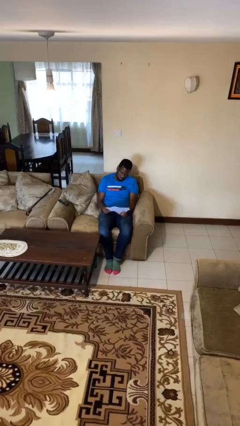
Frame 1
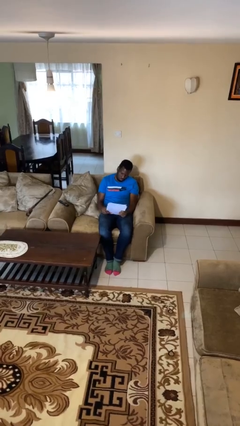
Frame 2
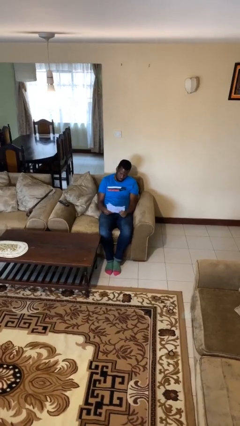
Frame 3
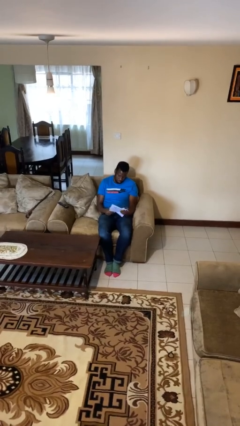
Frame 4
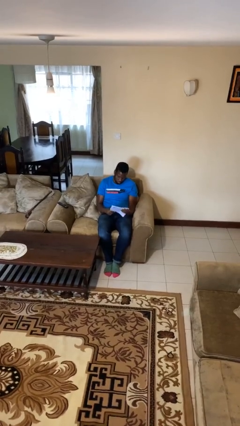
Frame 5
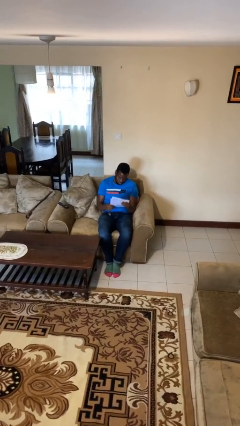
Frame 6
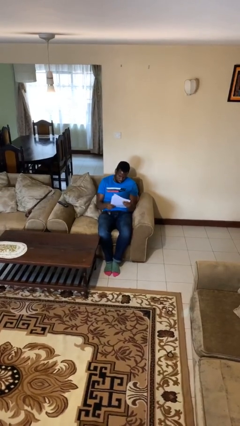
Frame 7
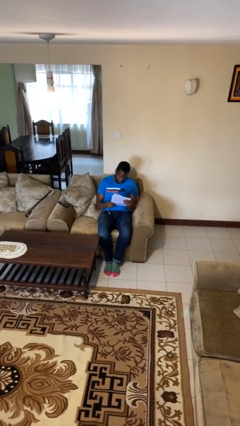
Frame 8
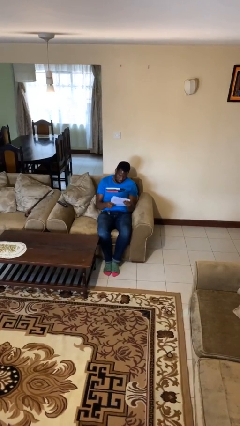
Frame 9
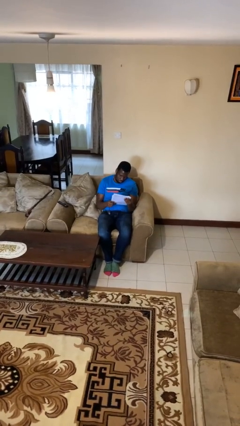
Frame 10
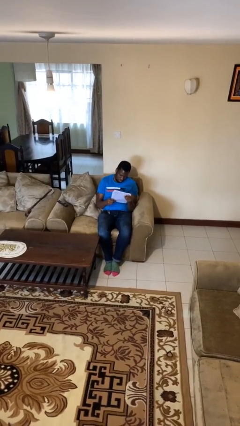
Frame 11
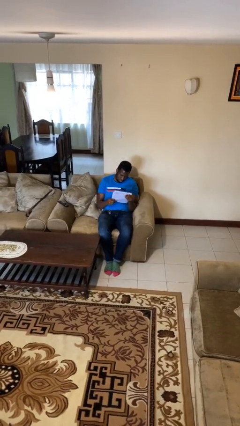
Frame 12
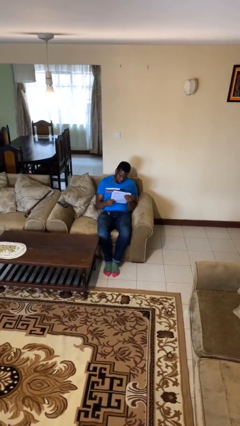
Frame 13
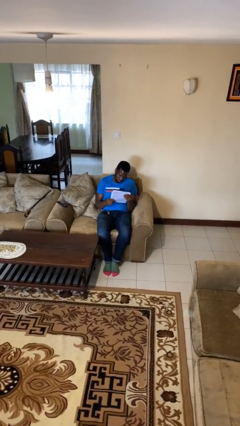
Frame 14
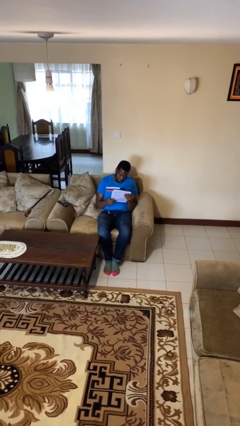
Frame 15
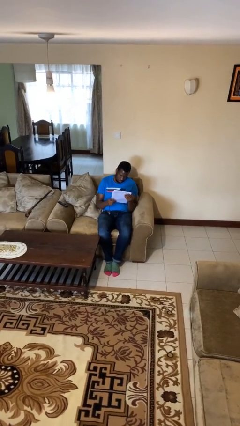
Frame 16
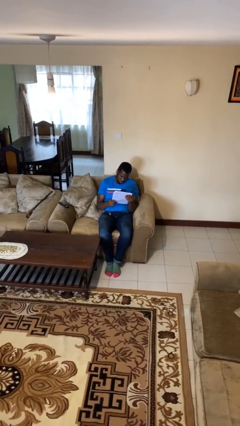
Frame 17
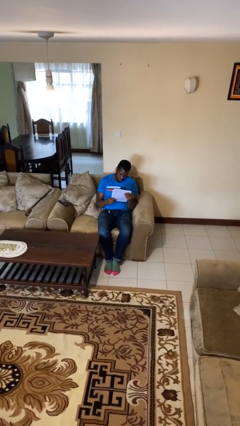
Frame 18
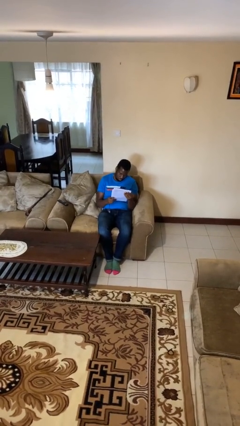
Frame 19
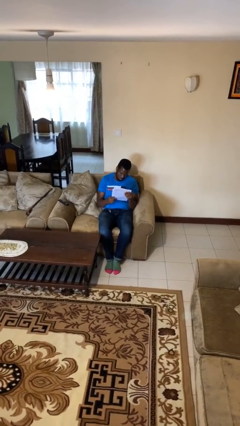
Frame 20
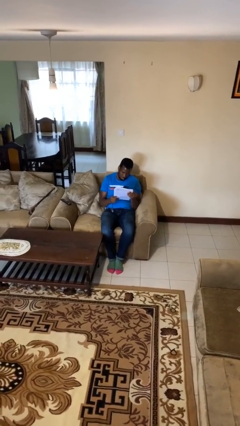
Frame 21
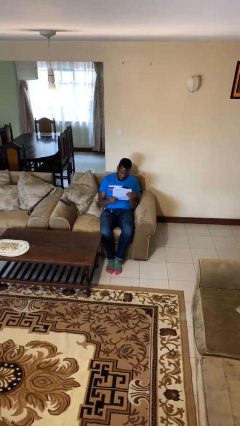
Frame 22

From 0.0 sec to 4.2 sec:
person reads document

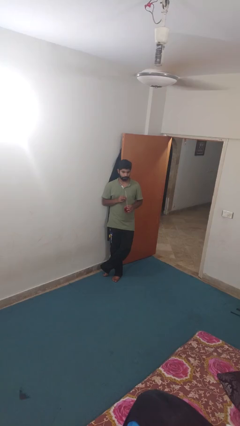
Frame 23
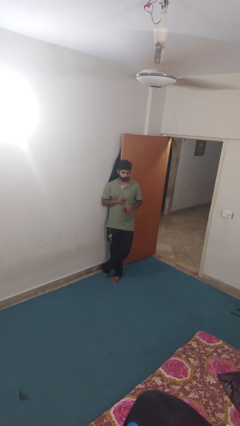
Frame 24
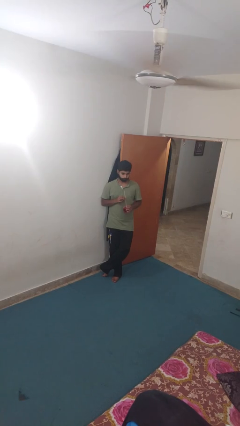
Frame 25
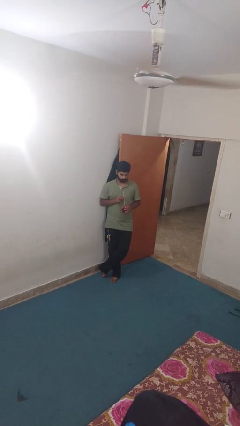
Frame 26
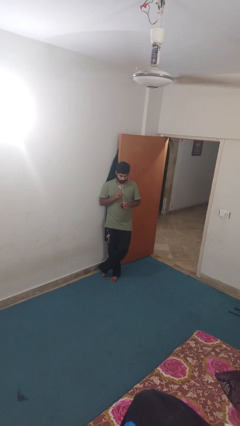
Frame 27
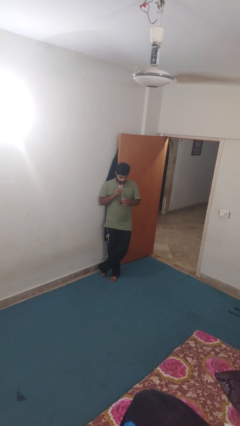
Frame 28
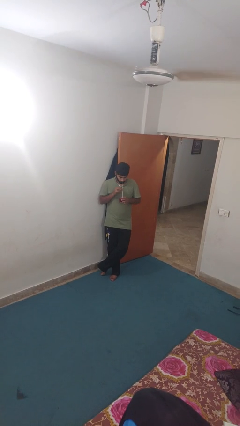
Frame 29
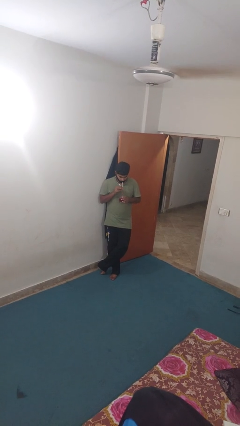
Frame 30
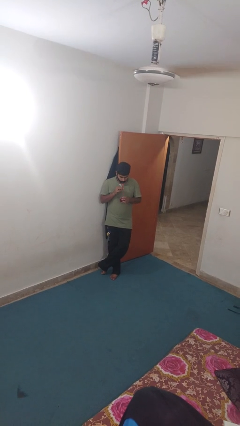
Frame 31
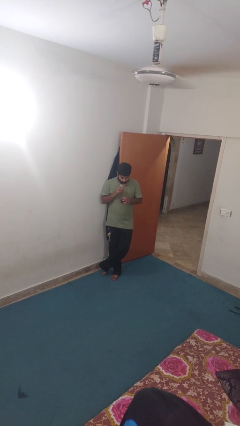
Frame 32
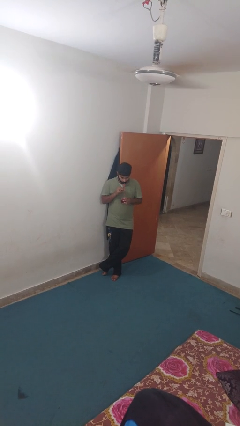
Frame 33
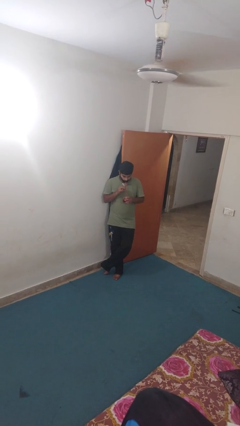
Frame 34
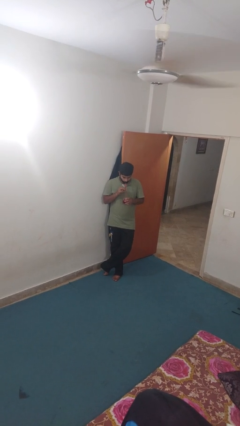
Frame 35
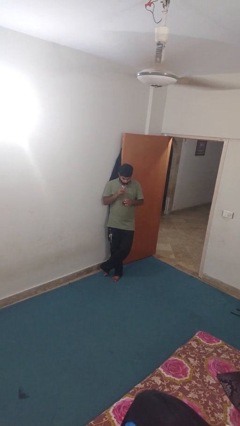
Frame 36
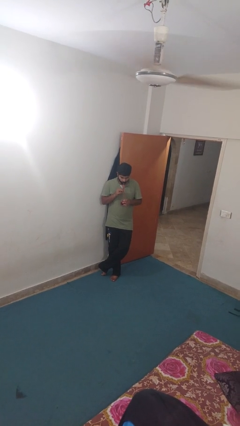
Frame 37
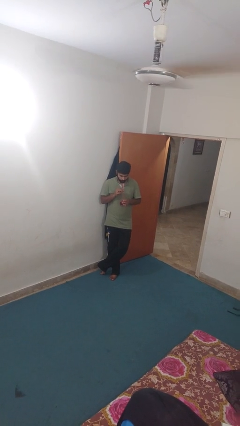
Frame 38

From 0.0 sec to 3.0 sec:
person drinks from straw

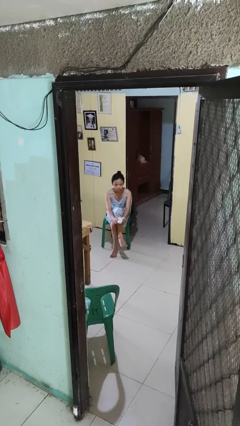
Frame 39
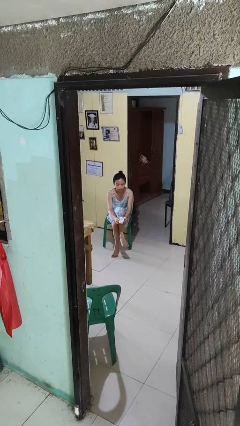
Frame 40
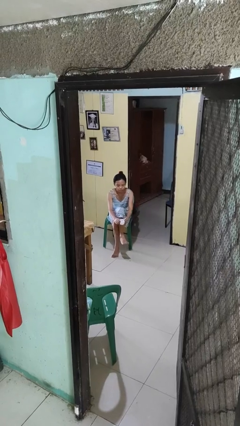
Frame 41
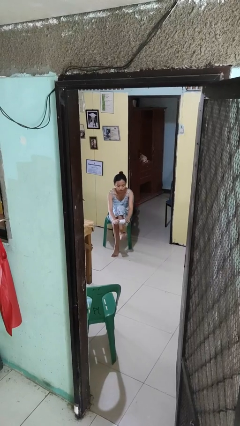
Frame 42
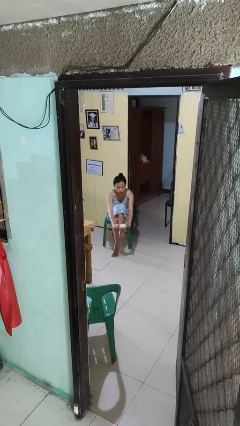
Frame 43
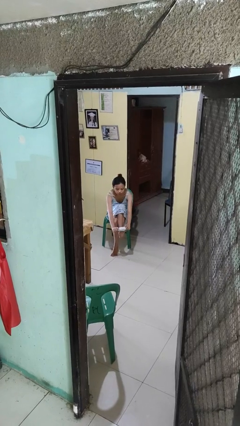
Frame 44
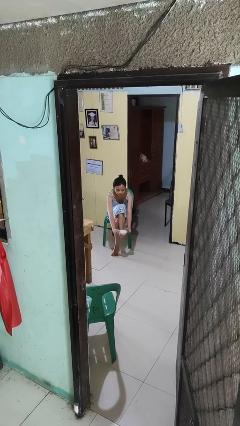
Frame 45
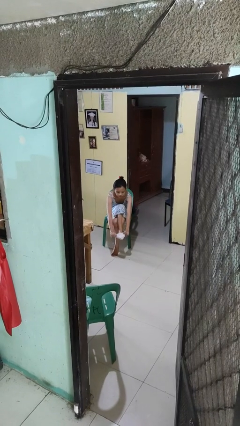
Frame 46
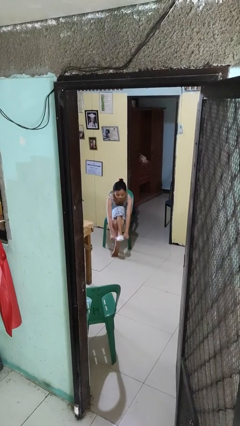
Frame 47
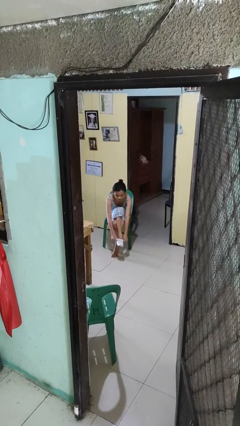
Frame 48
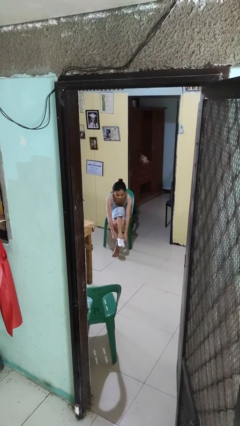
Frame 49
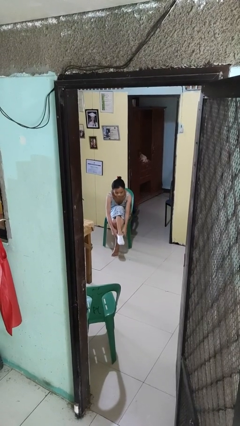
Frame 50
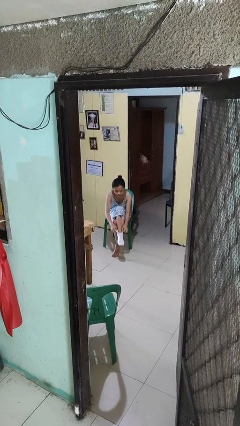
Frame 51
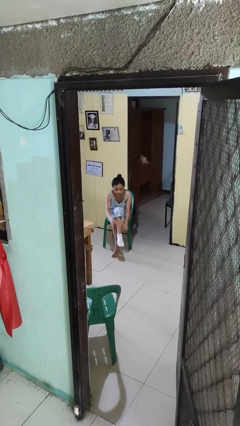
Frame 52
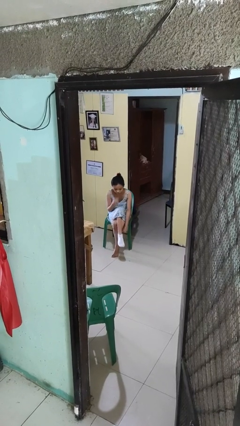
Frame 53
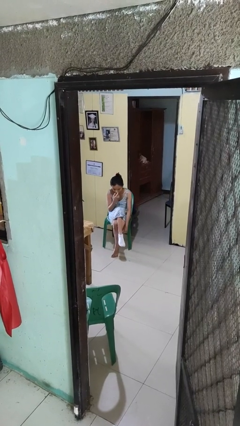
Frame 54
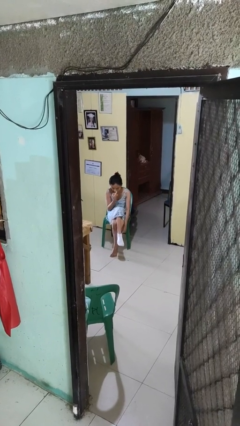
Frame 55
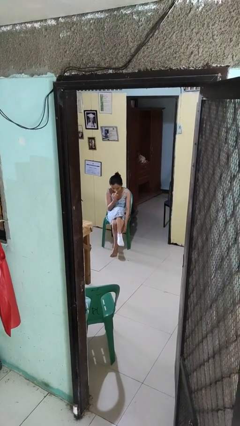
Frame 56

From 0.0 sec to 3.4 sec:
person puts on socks

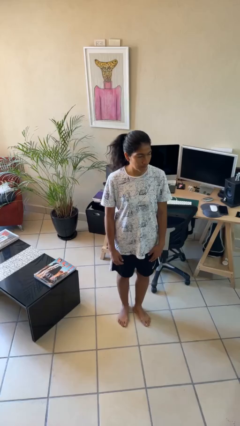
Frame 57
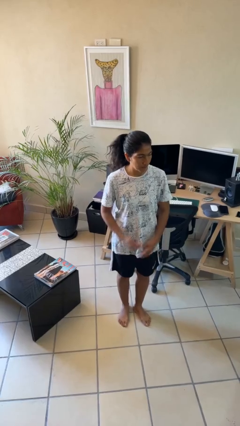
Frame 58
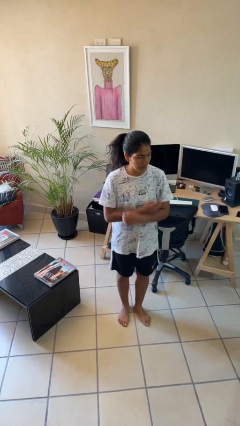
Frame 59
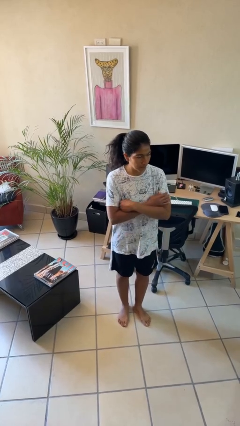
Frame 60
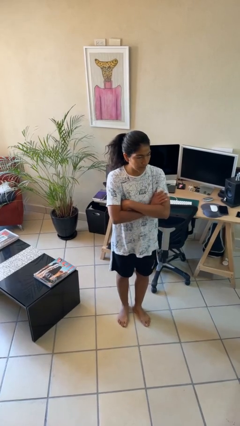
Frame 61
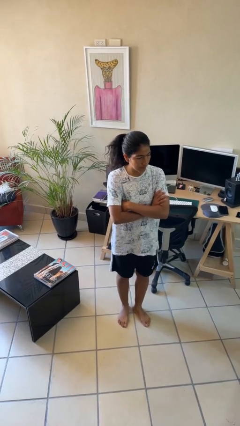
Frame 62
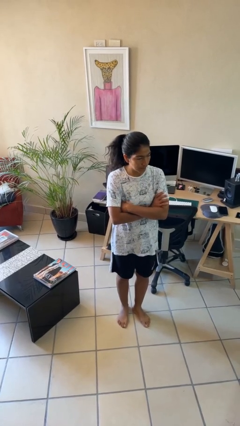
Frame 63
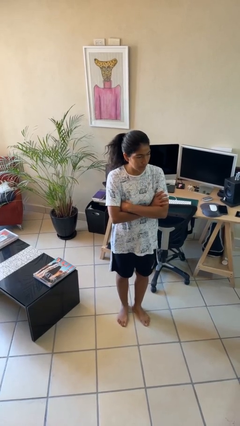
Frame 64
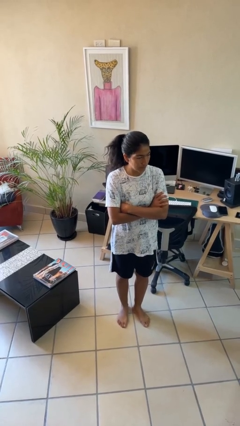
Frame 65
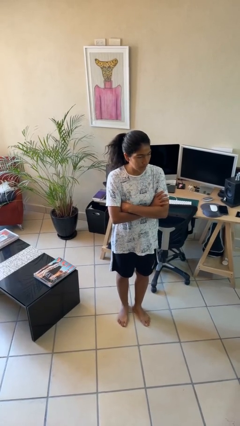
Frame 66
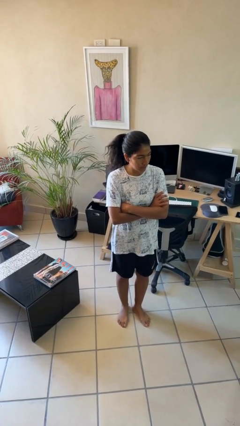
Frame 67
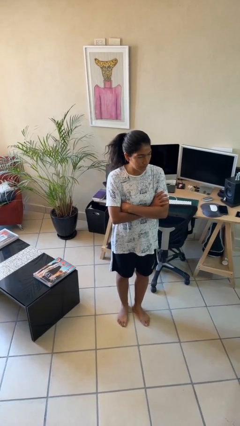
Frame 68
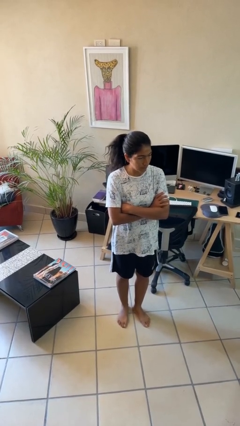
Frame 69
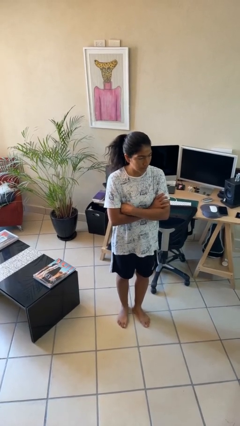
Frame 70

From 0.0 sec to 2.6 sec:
person crosses arms

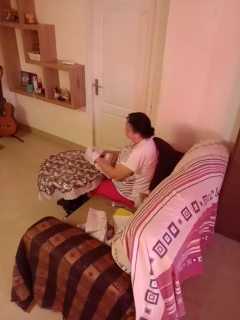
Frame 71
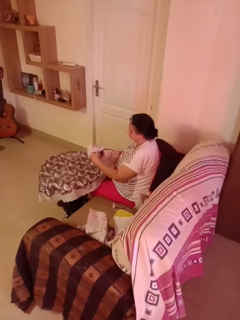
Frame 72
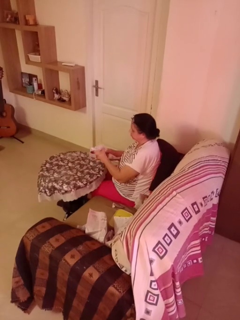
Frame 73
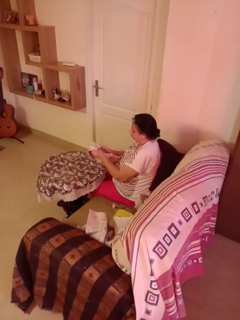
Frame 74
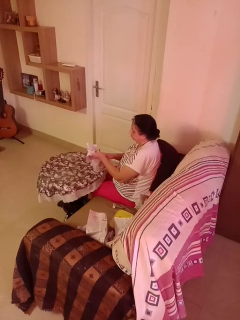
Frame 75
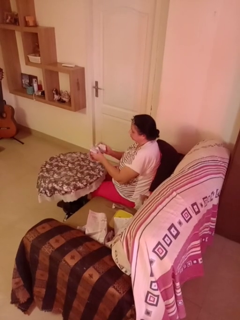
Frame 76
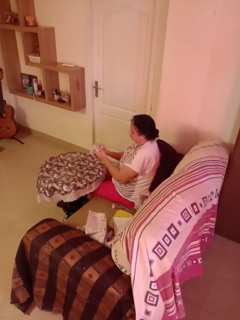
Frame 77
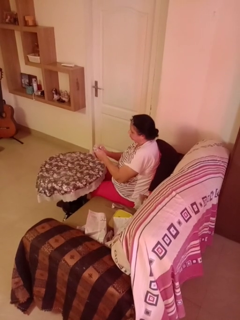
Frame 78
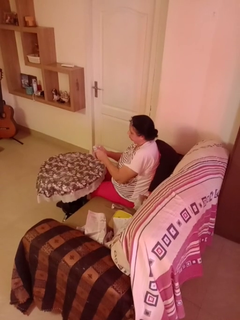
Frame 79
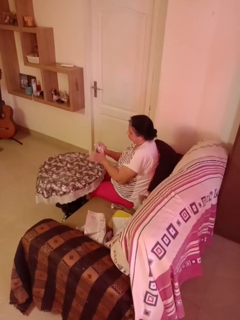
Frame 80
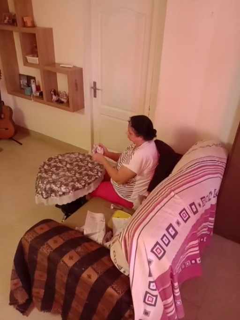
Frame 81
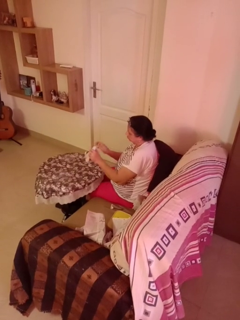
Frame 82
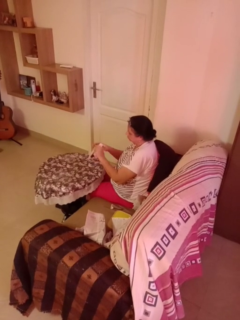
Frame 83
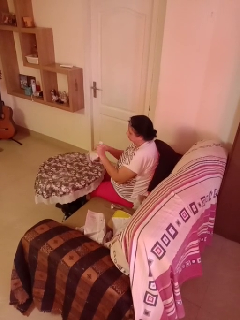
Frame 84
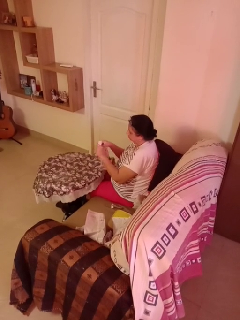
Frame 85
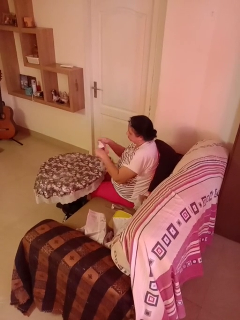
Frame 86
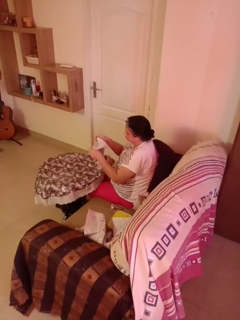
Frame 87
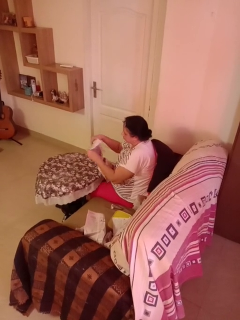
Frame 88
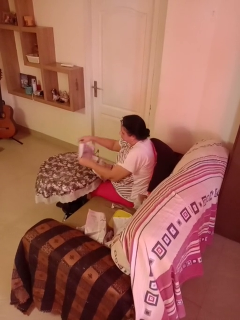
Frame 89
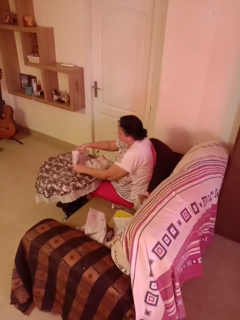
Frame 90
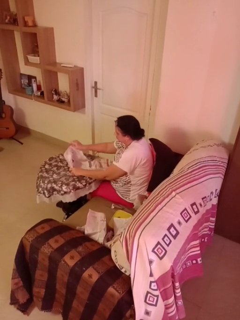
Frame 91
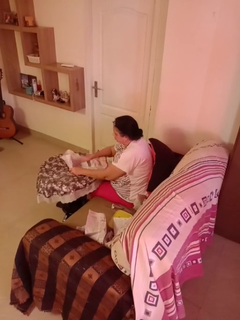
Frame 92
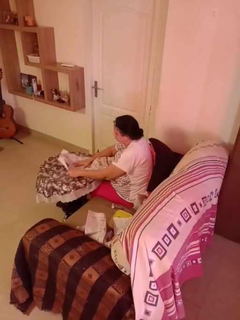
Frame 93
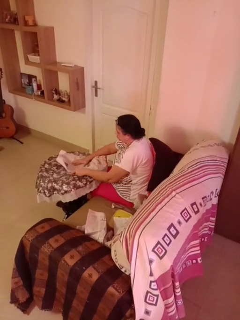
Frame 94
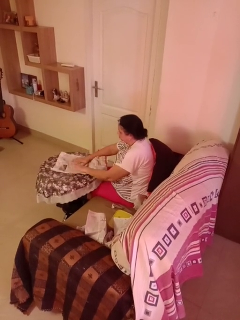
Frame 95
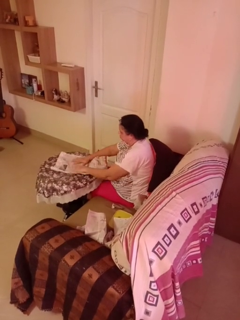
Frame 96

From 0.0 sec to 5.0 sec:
person crumples paper

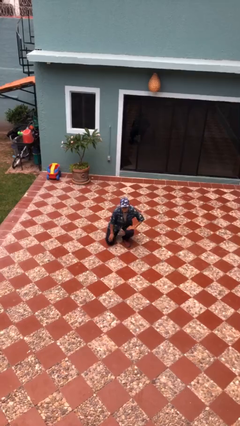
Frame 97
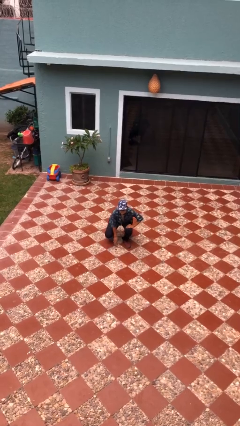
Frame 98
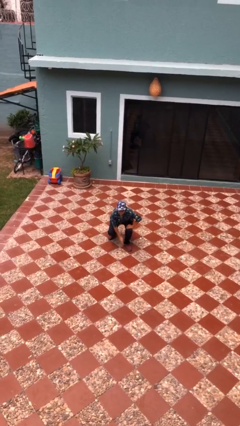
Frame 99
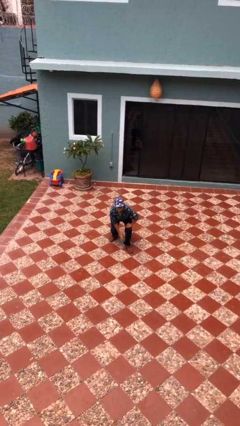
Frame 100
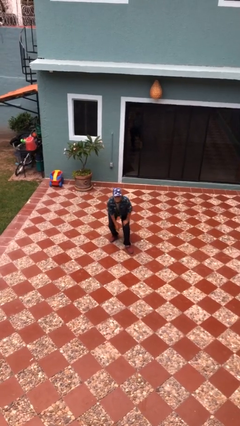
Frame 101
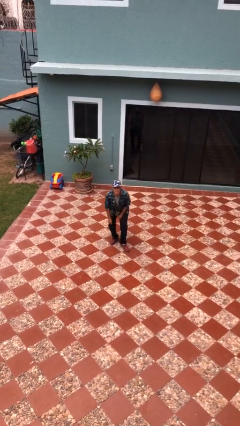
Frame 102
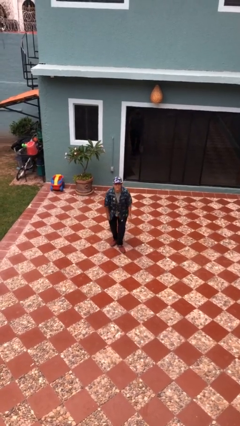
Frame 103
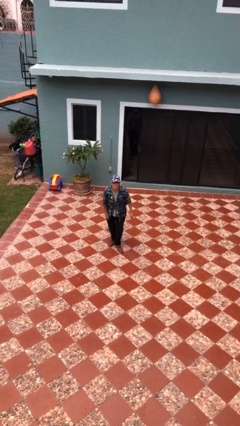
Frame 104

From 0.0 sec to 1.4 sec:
person stands up from floor
